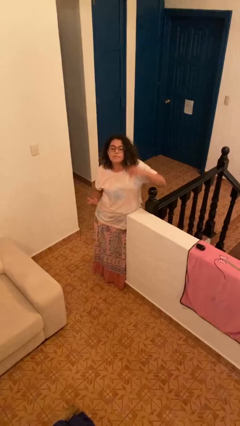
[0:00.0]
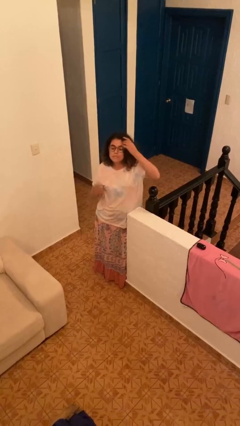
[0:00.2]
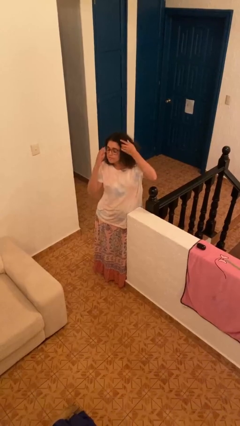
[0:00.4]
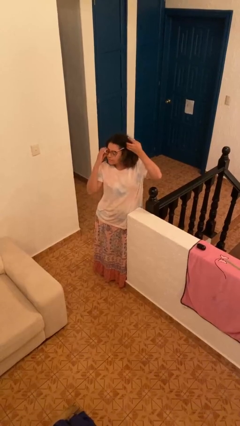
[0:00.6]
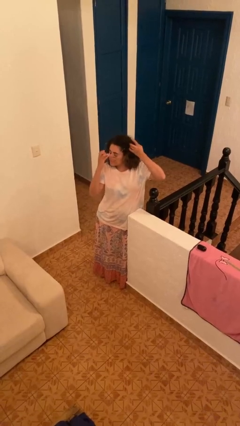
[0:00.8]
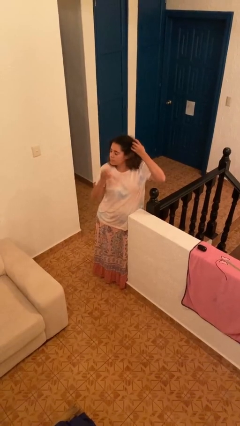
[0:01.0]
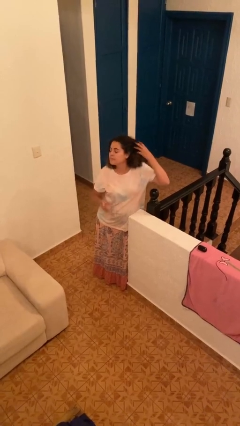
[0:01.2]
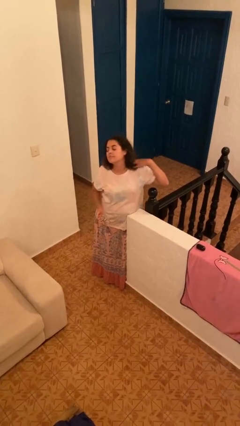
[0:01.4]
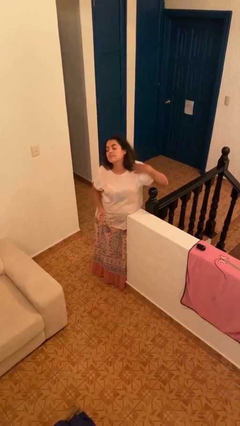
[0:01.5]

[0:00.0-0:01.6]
person takes off glasses

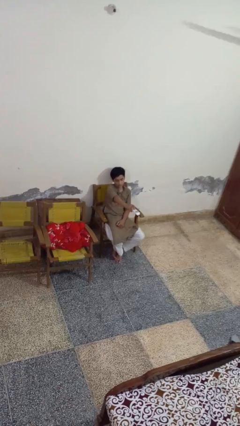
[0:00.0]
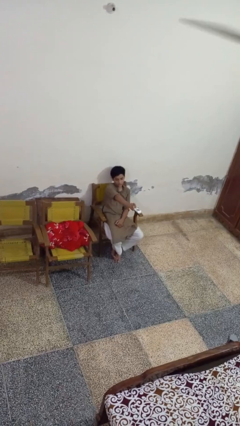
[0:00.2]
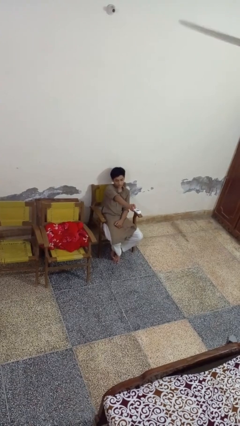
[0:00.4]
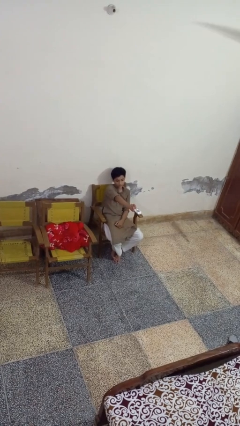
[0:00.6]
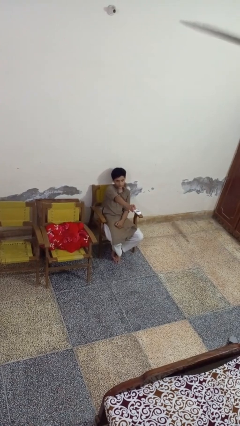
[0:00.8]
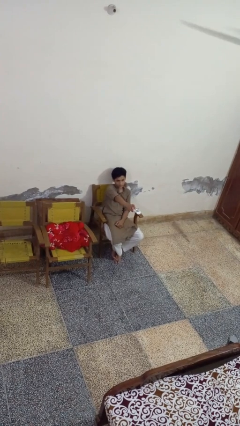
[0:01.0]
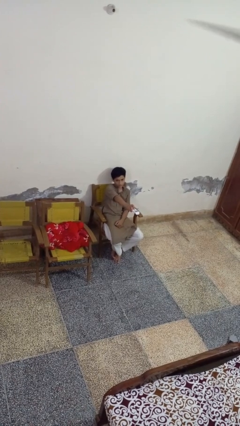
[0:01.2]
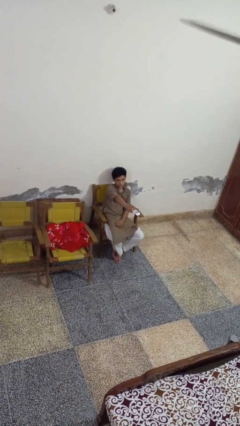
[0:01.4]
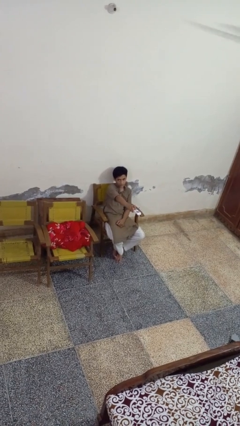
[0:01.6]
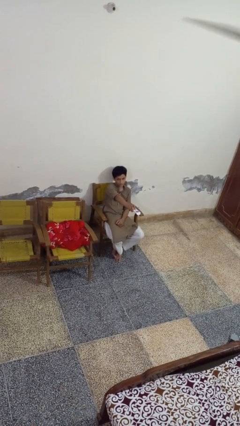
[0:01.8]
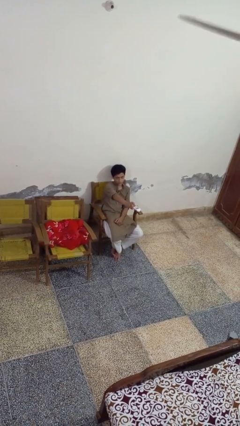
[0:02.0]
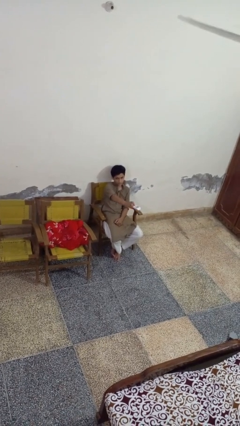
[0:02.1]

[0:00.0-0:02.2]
person uses television remote

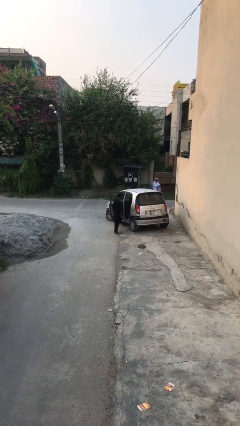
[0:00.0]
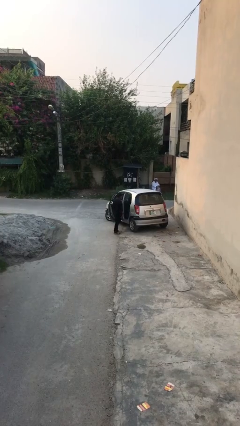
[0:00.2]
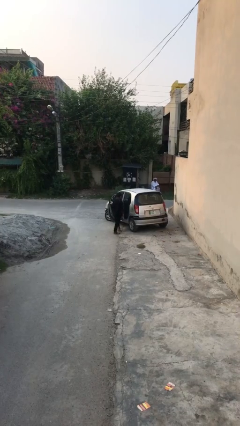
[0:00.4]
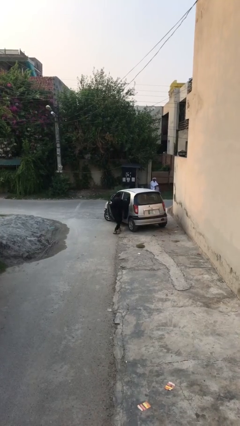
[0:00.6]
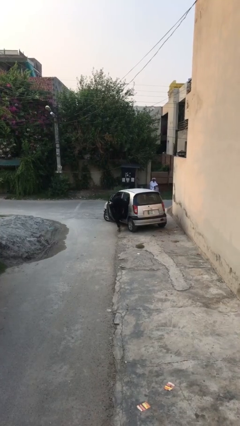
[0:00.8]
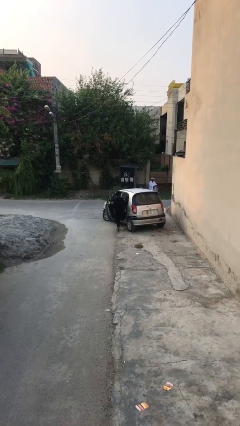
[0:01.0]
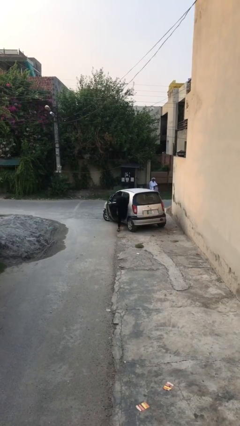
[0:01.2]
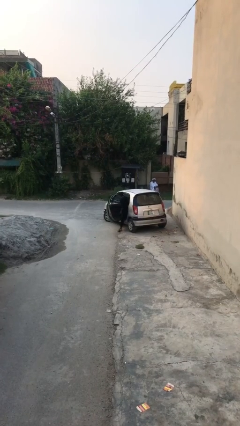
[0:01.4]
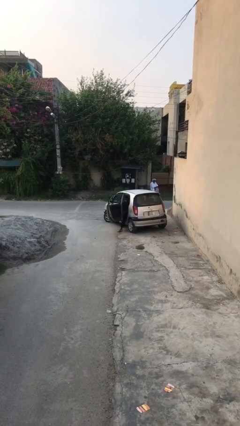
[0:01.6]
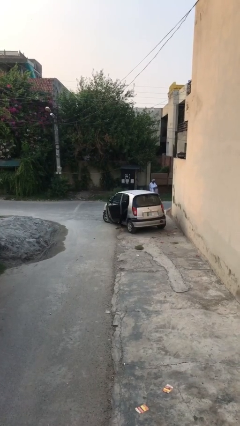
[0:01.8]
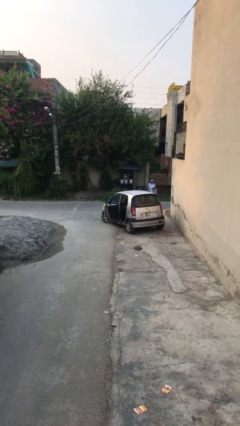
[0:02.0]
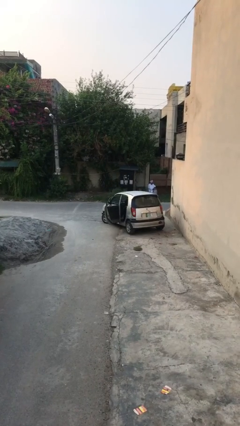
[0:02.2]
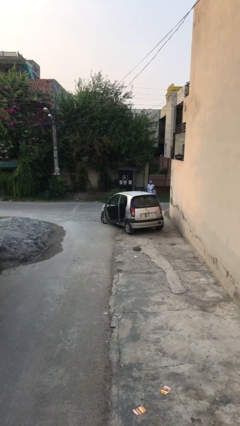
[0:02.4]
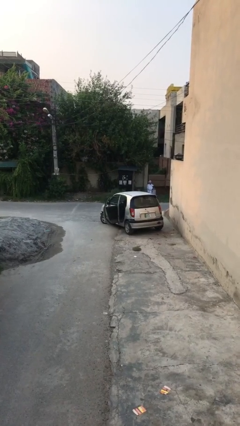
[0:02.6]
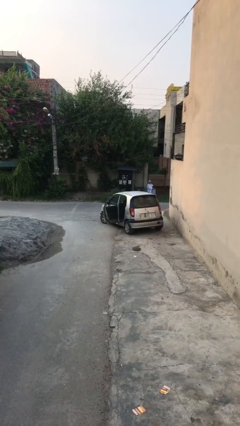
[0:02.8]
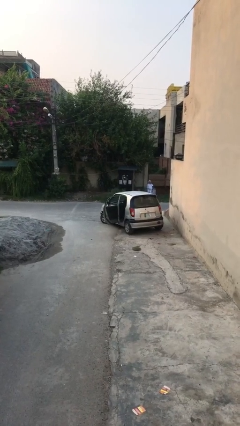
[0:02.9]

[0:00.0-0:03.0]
person enters car

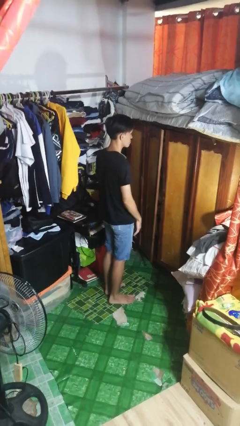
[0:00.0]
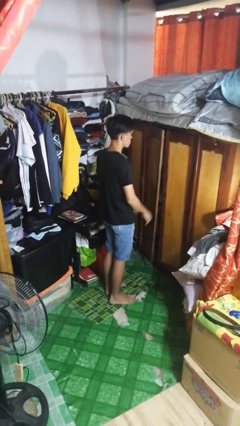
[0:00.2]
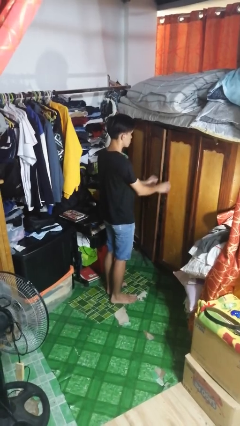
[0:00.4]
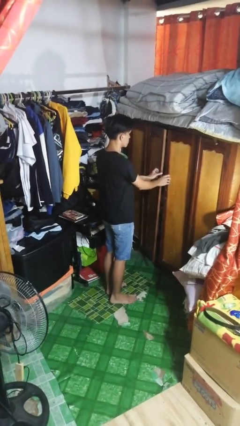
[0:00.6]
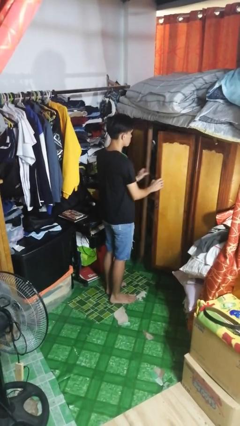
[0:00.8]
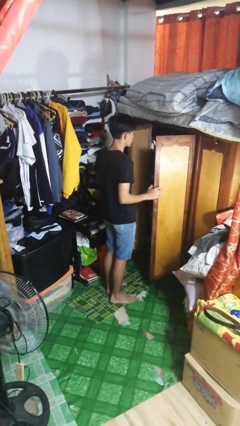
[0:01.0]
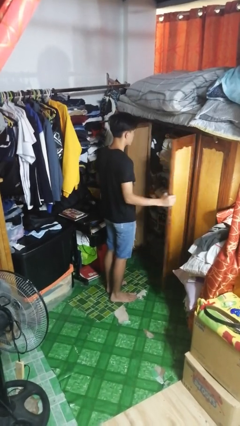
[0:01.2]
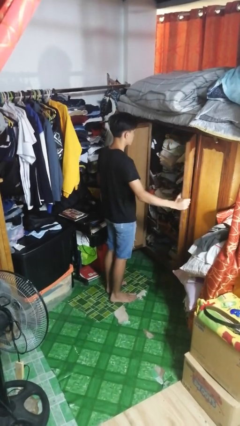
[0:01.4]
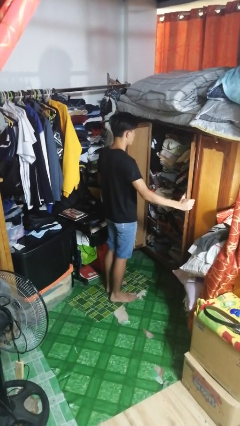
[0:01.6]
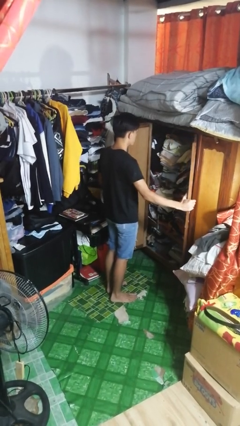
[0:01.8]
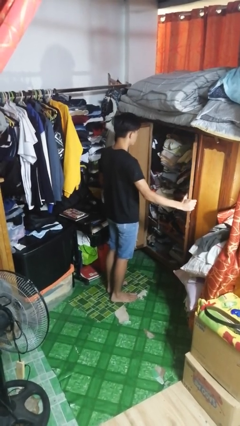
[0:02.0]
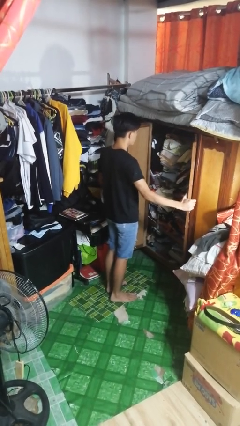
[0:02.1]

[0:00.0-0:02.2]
person opens closet door

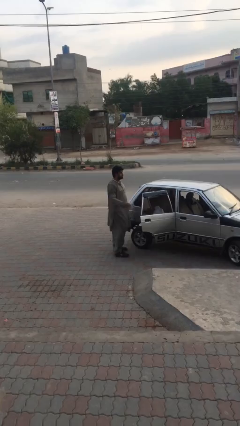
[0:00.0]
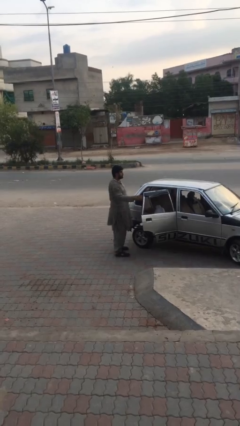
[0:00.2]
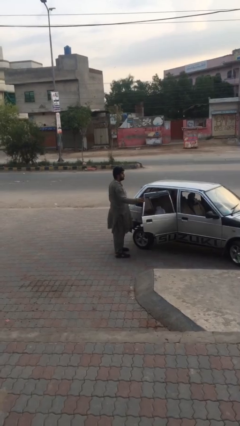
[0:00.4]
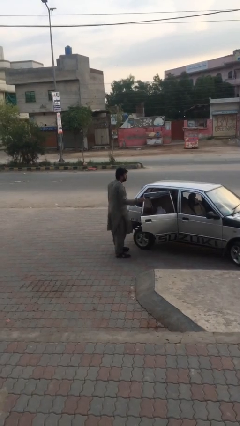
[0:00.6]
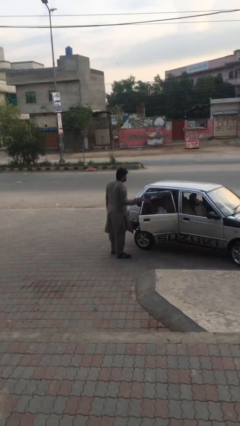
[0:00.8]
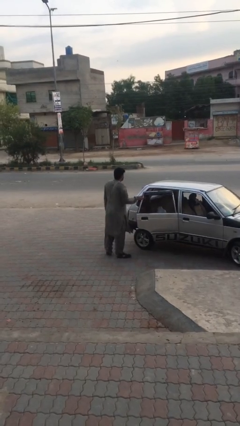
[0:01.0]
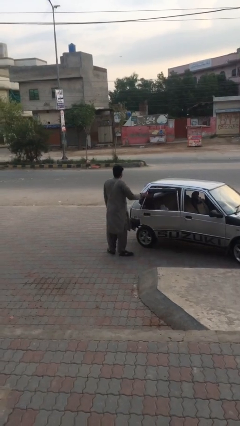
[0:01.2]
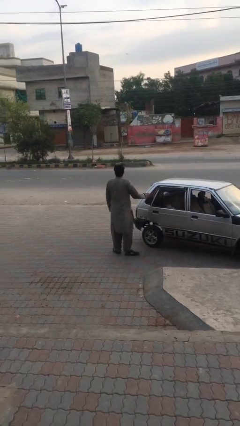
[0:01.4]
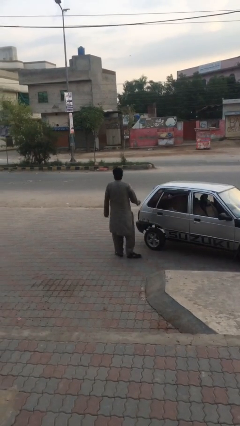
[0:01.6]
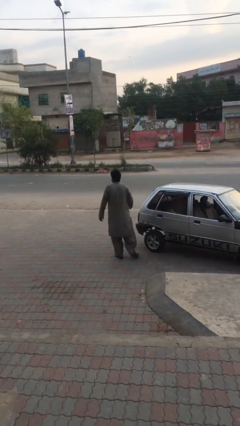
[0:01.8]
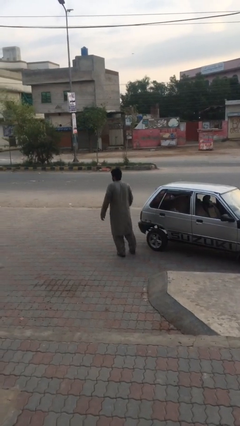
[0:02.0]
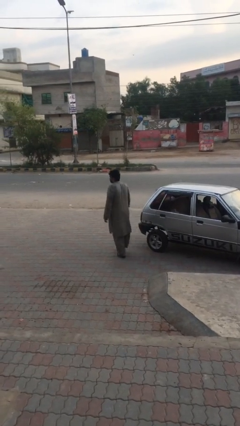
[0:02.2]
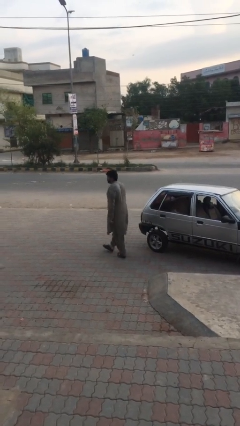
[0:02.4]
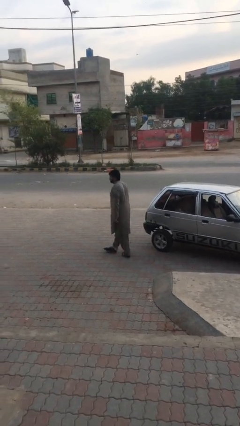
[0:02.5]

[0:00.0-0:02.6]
person closes car door

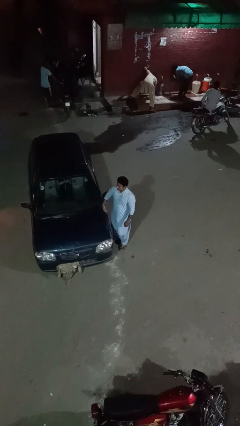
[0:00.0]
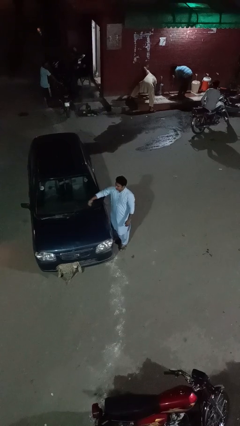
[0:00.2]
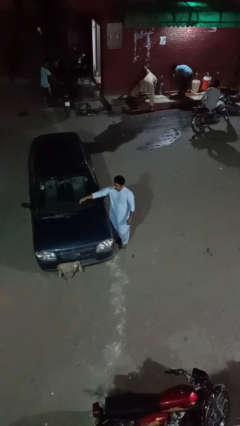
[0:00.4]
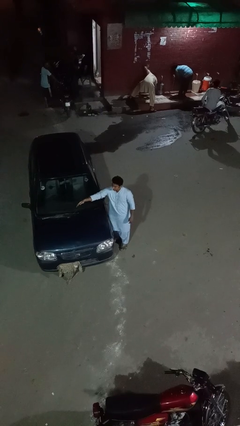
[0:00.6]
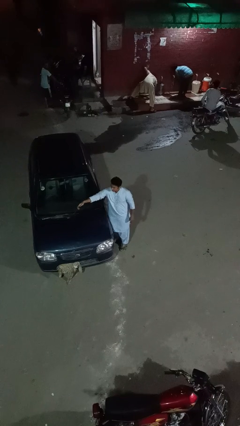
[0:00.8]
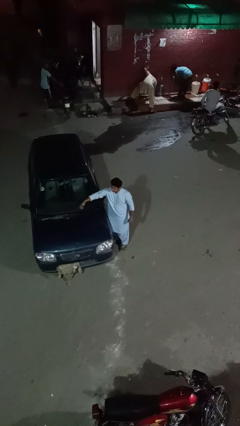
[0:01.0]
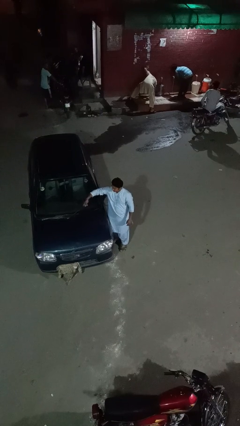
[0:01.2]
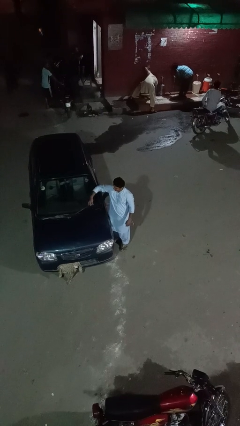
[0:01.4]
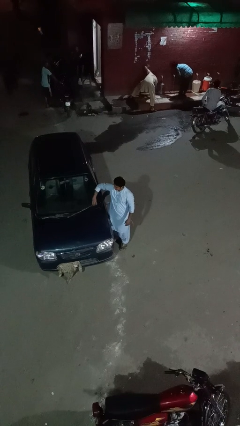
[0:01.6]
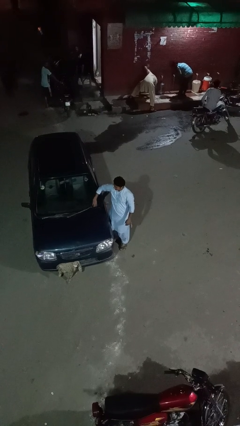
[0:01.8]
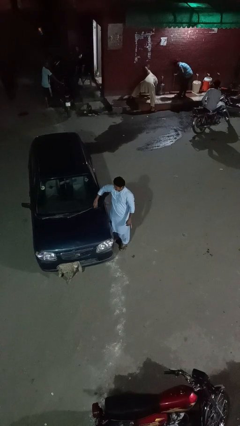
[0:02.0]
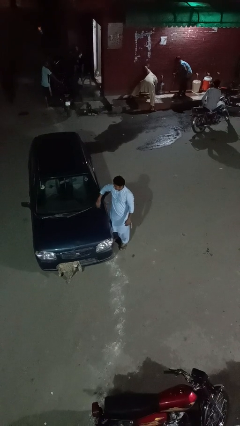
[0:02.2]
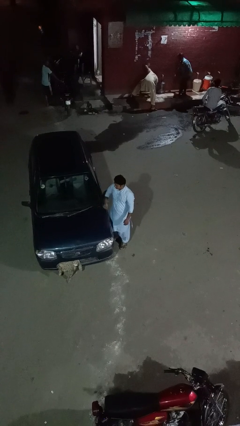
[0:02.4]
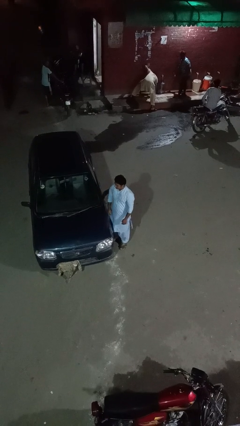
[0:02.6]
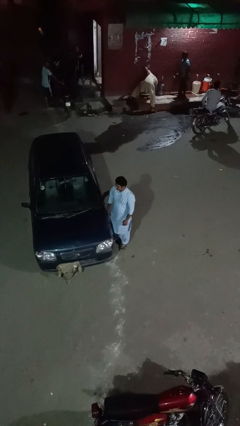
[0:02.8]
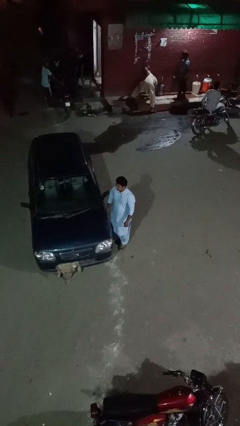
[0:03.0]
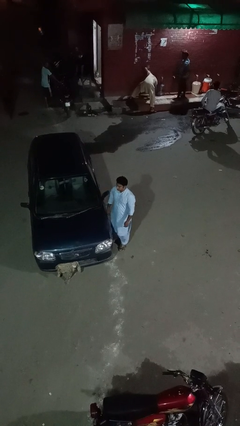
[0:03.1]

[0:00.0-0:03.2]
person flips down car wipers

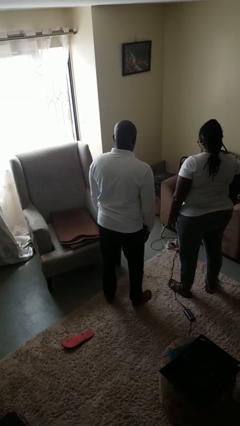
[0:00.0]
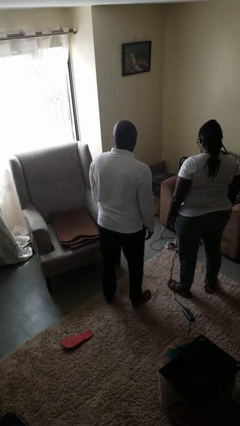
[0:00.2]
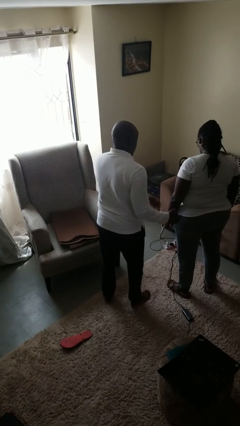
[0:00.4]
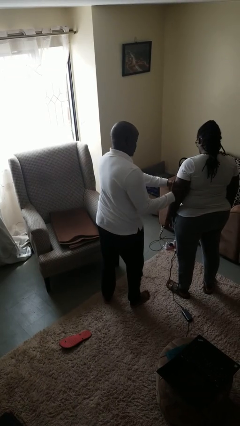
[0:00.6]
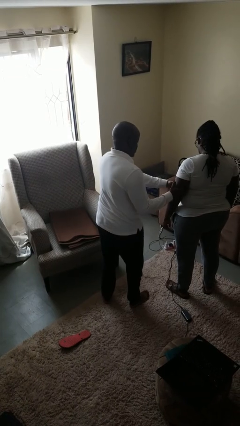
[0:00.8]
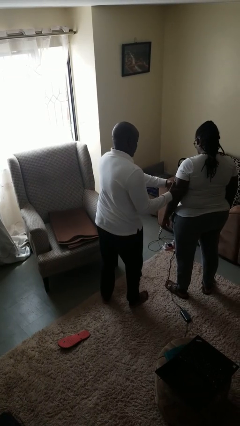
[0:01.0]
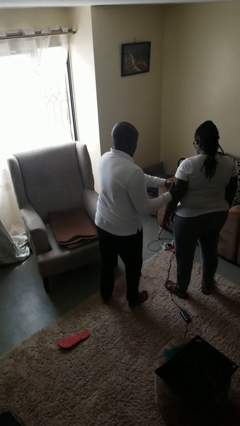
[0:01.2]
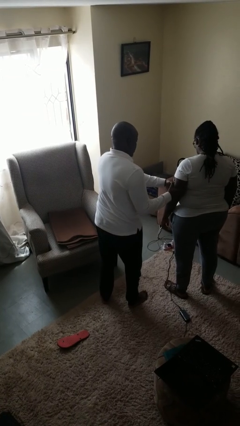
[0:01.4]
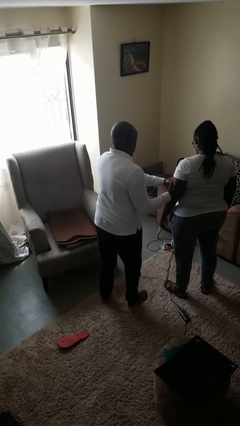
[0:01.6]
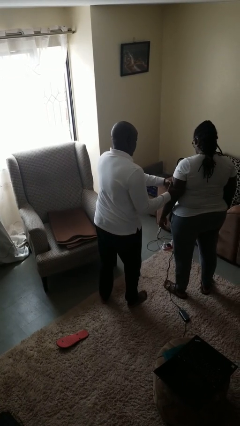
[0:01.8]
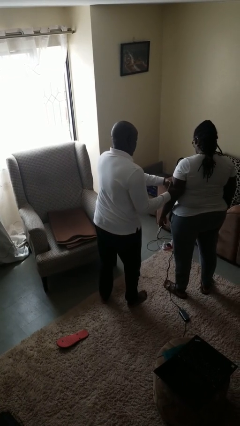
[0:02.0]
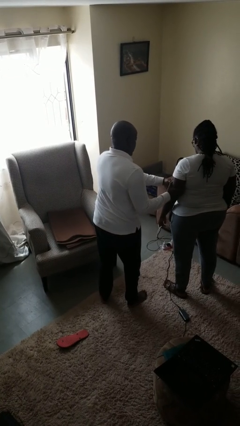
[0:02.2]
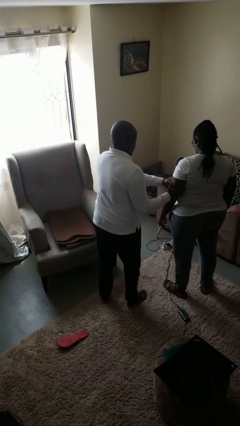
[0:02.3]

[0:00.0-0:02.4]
person grabs person by bicep
